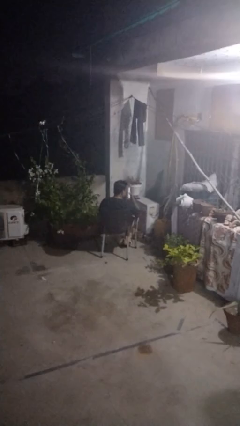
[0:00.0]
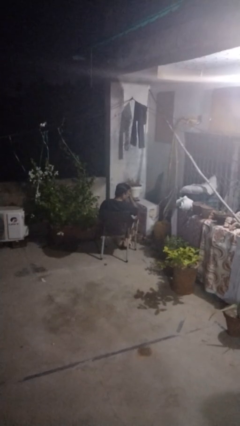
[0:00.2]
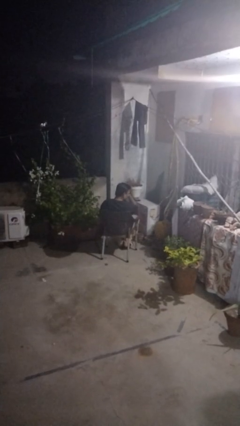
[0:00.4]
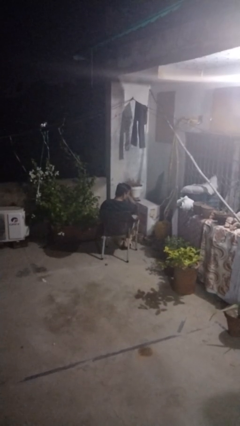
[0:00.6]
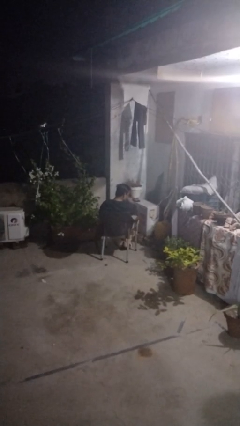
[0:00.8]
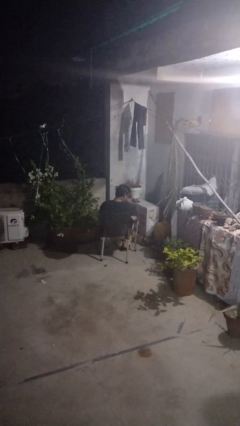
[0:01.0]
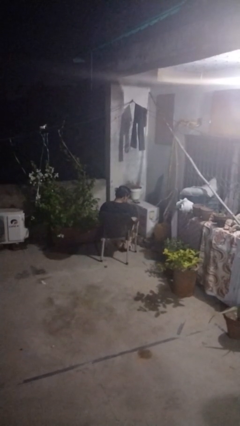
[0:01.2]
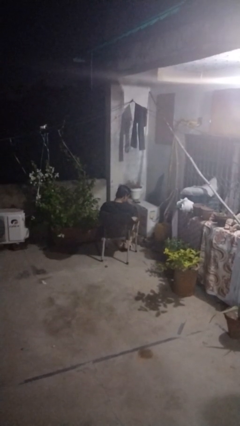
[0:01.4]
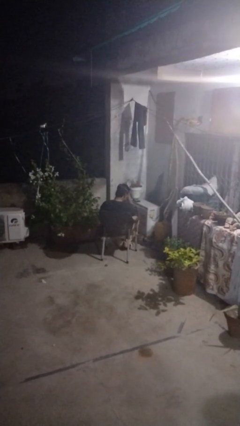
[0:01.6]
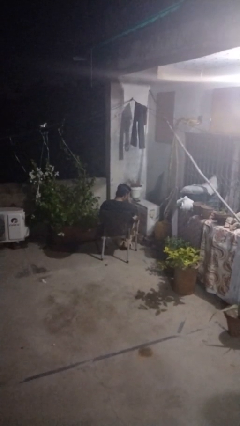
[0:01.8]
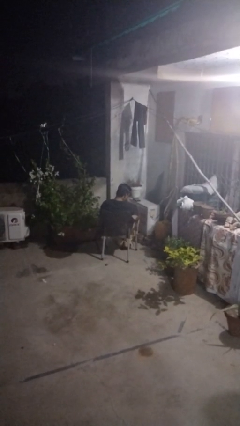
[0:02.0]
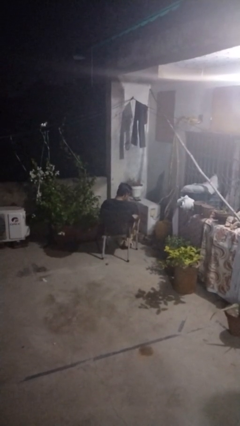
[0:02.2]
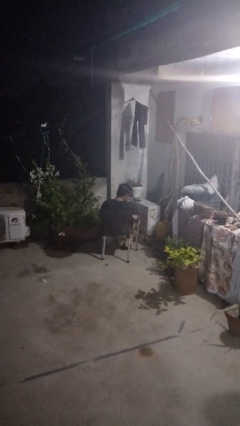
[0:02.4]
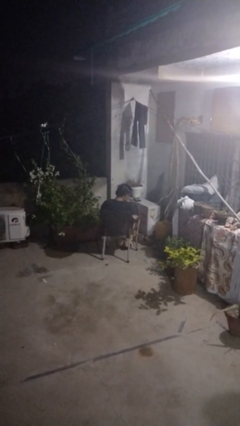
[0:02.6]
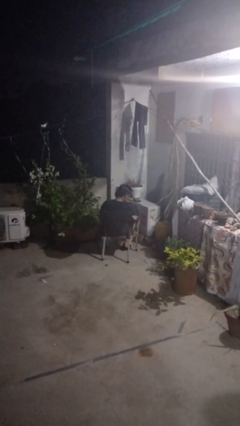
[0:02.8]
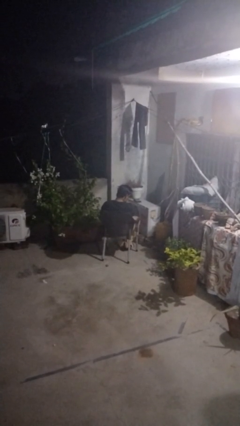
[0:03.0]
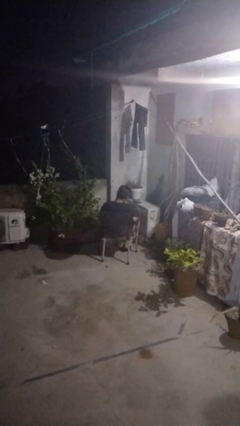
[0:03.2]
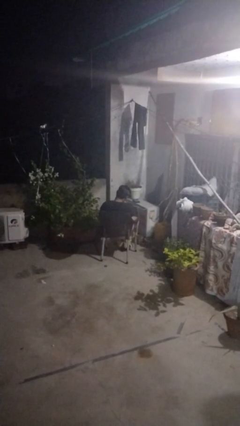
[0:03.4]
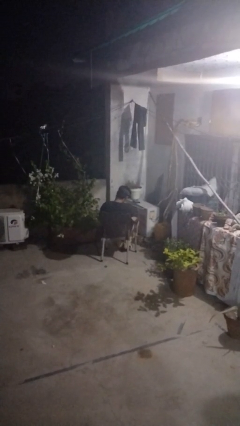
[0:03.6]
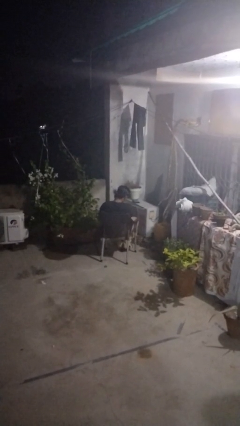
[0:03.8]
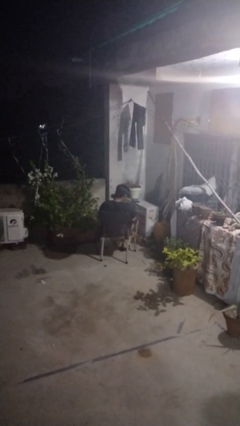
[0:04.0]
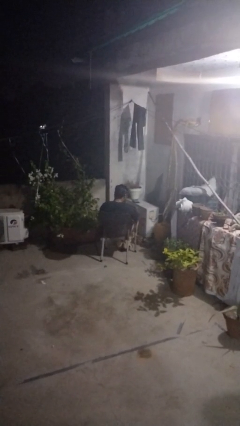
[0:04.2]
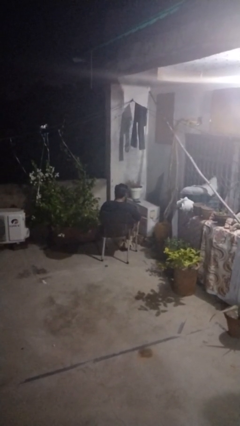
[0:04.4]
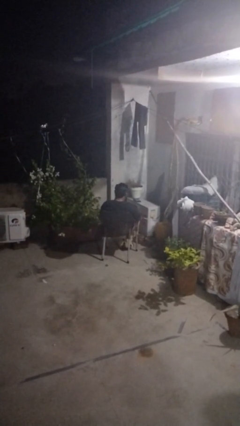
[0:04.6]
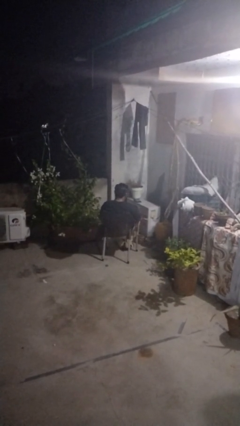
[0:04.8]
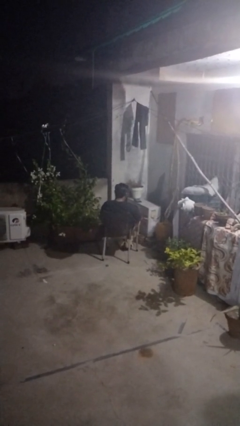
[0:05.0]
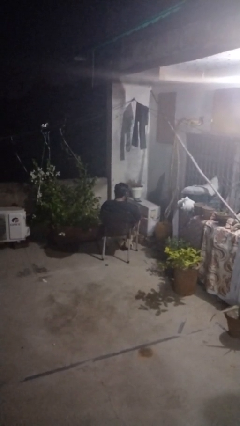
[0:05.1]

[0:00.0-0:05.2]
person dries hair with hairdryer

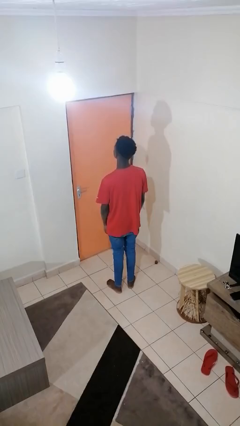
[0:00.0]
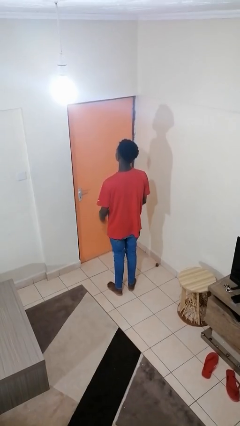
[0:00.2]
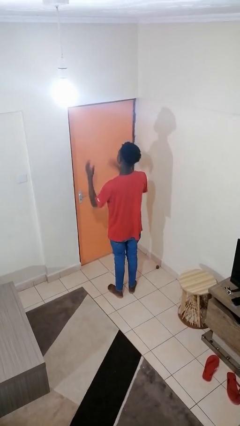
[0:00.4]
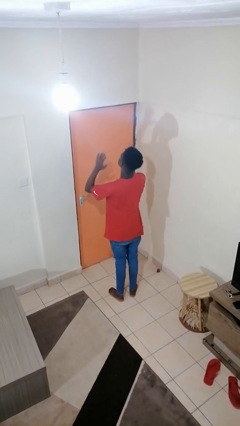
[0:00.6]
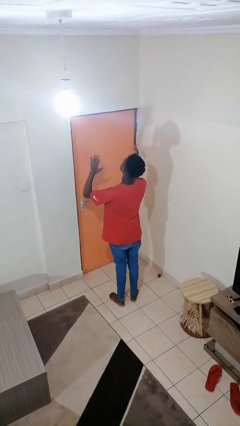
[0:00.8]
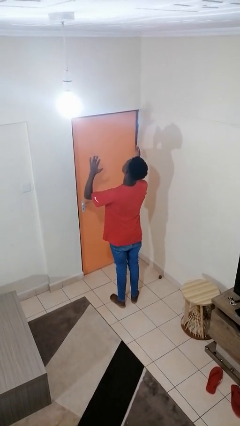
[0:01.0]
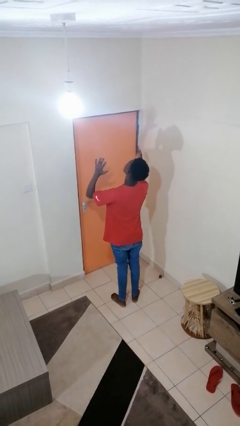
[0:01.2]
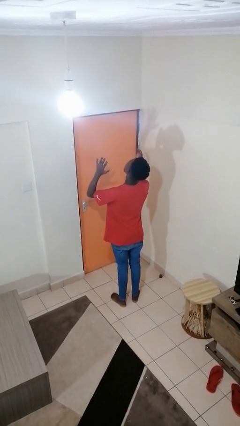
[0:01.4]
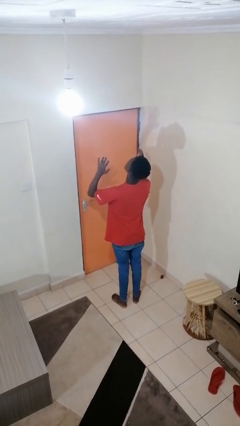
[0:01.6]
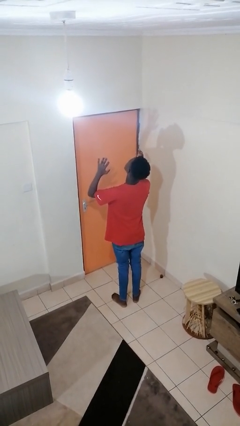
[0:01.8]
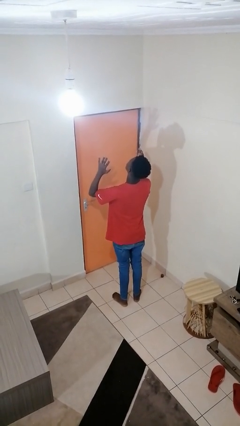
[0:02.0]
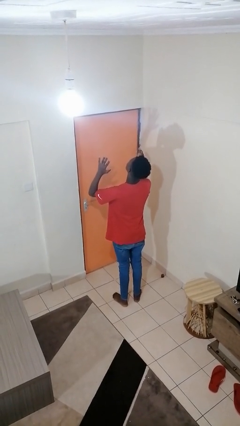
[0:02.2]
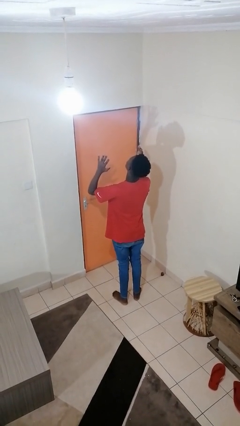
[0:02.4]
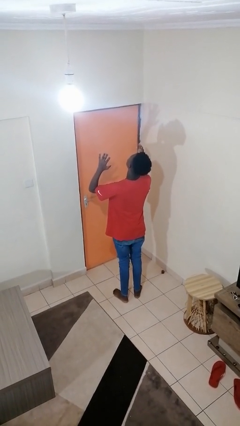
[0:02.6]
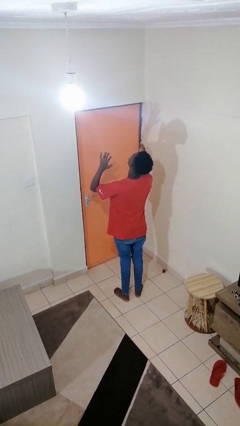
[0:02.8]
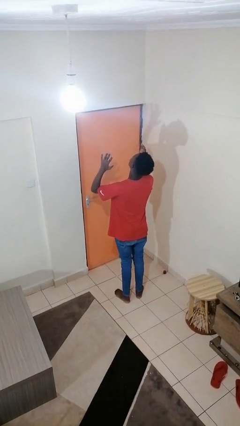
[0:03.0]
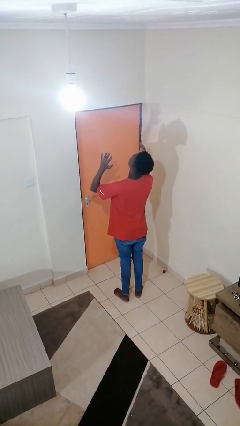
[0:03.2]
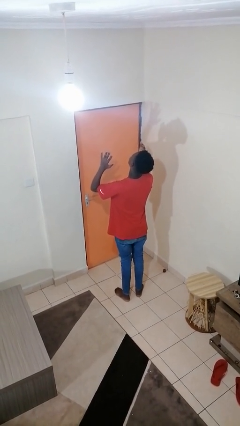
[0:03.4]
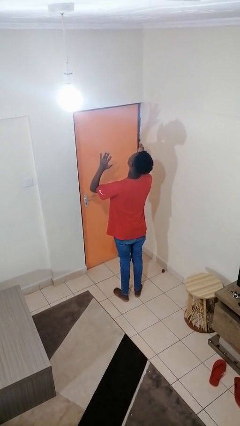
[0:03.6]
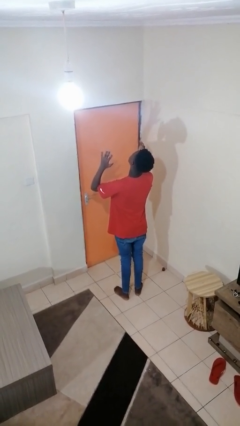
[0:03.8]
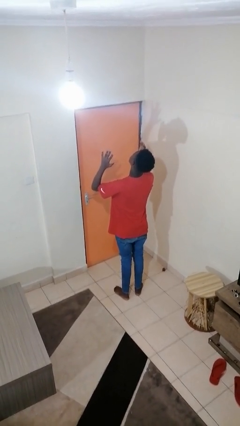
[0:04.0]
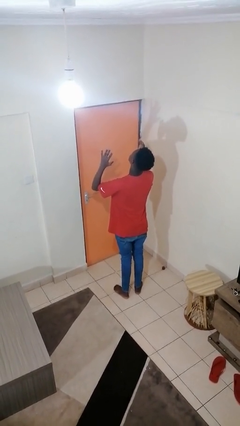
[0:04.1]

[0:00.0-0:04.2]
person prays

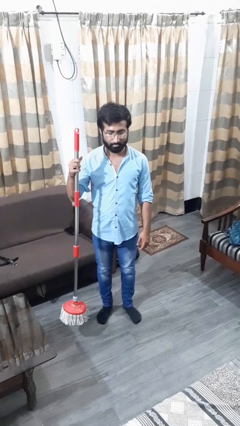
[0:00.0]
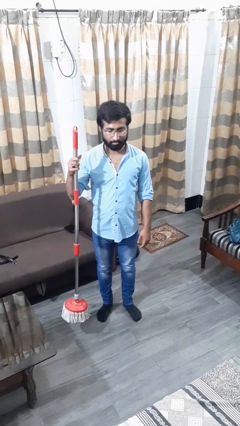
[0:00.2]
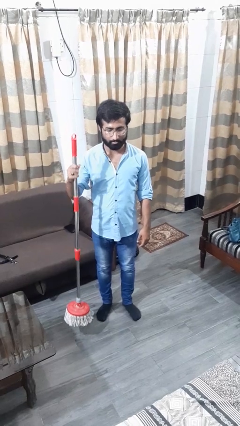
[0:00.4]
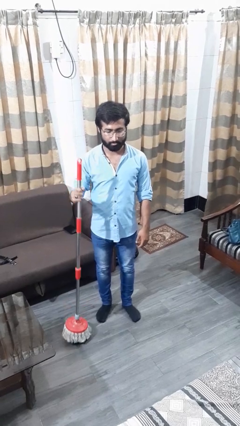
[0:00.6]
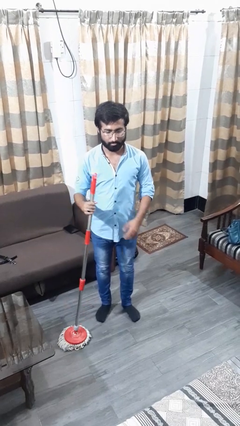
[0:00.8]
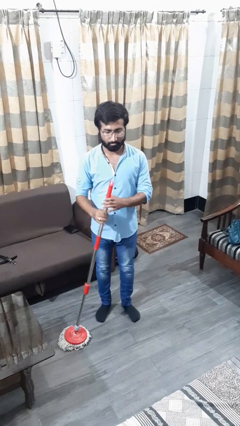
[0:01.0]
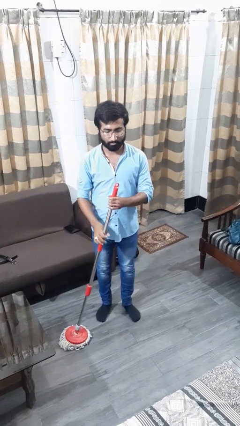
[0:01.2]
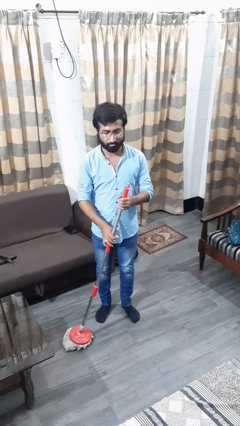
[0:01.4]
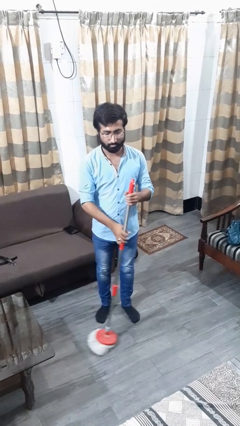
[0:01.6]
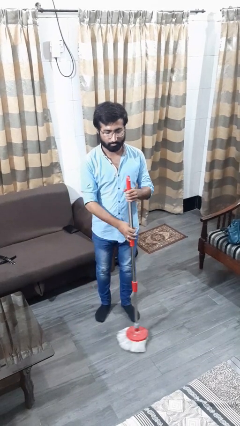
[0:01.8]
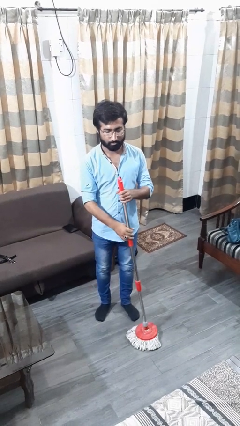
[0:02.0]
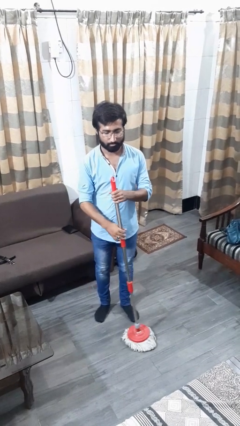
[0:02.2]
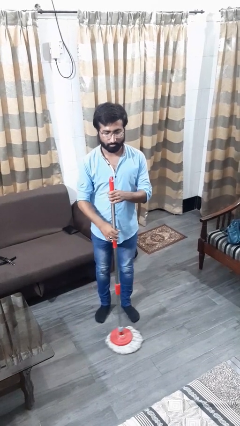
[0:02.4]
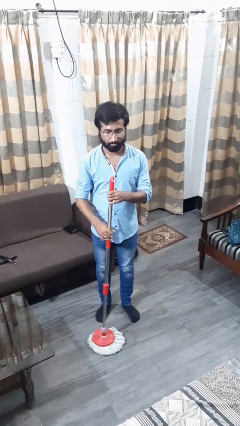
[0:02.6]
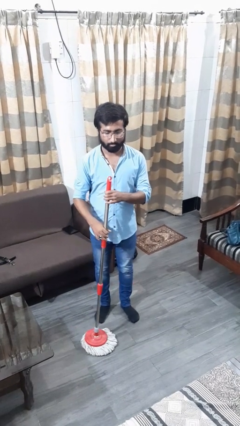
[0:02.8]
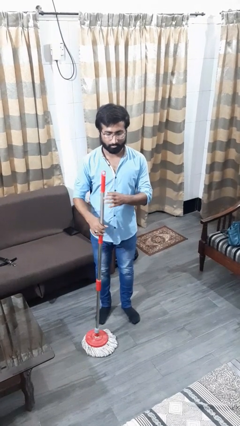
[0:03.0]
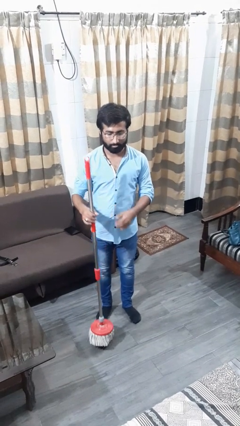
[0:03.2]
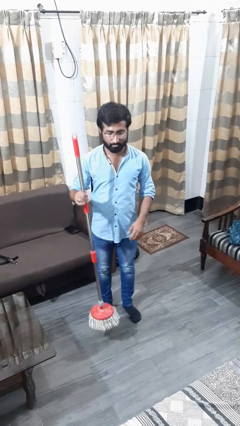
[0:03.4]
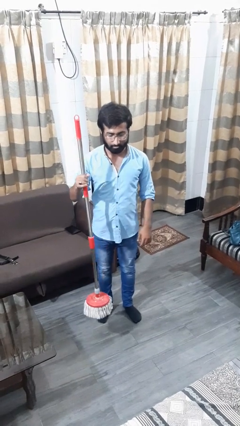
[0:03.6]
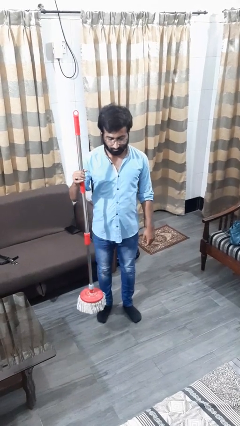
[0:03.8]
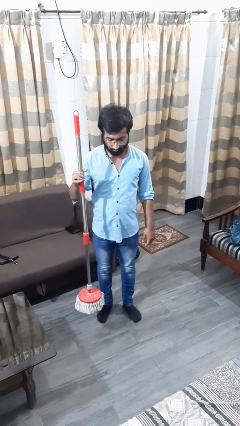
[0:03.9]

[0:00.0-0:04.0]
person sweeps floor

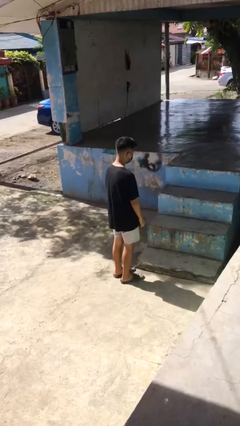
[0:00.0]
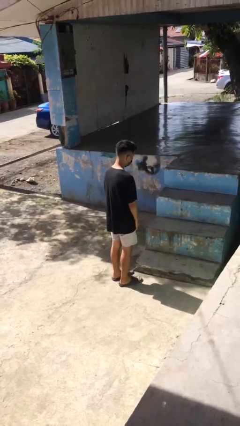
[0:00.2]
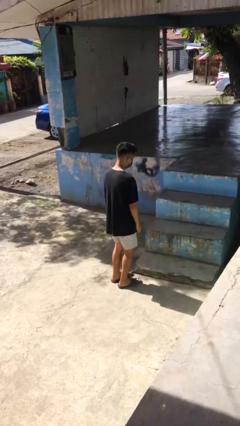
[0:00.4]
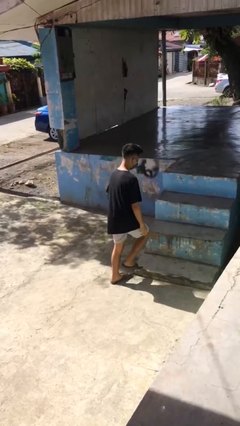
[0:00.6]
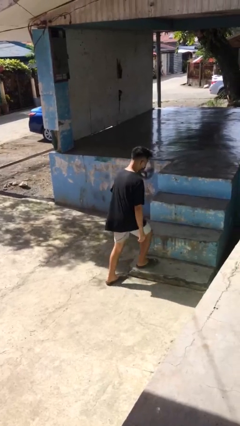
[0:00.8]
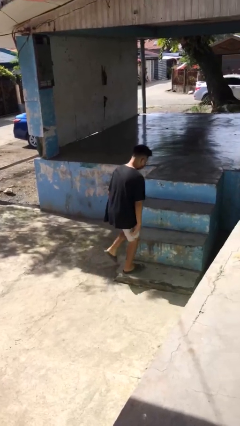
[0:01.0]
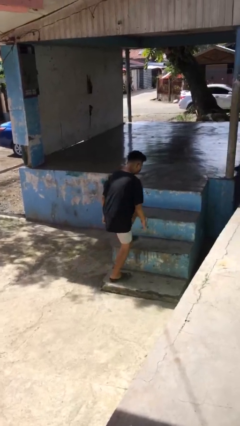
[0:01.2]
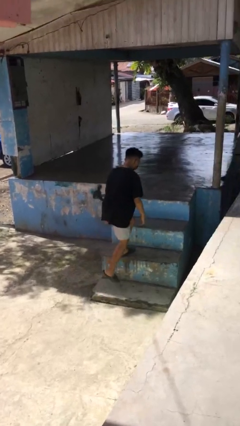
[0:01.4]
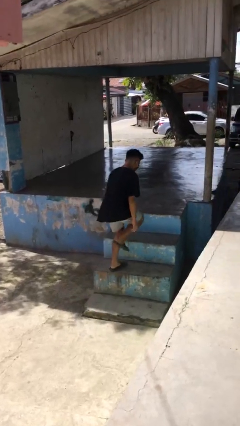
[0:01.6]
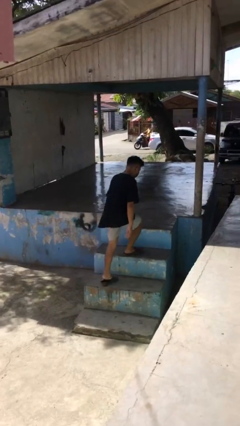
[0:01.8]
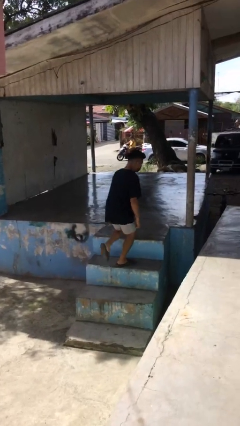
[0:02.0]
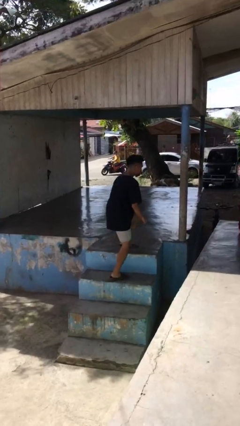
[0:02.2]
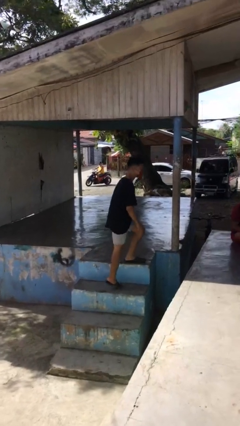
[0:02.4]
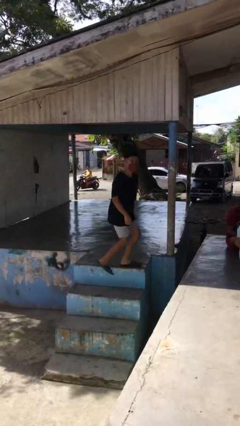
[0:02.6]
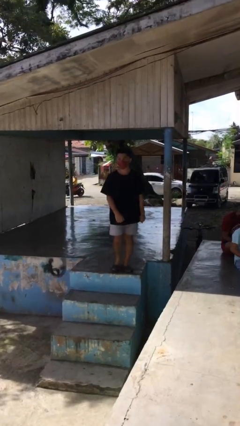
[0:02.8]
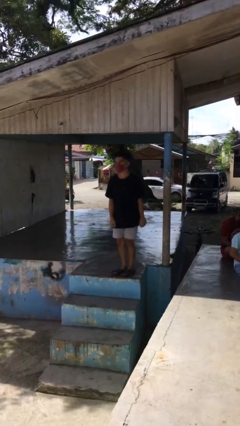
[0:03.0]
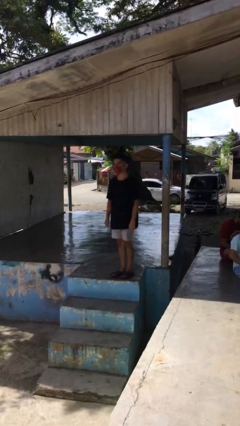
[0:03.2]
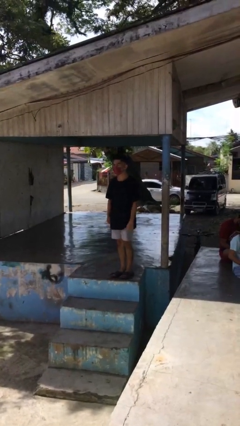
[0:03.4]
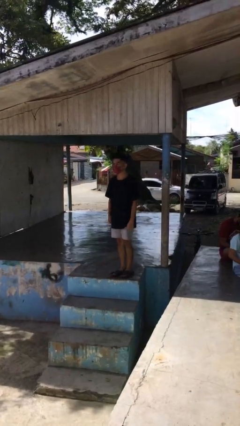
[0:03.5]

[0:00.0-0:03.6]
person climbs up stairs

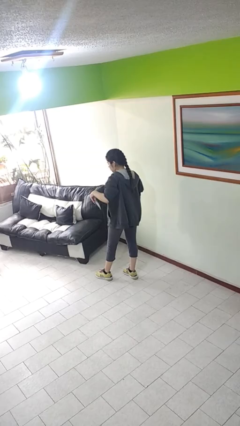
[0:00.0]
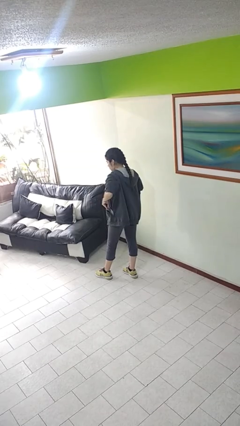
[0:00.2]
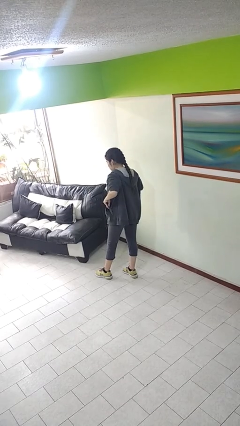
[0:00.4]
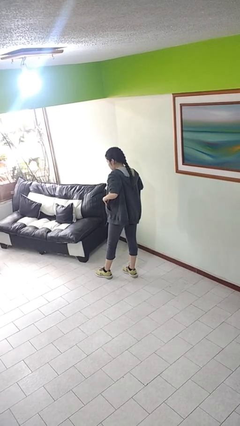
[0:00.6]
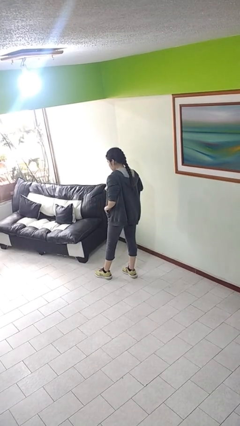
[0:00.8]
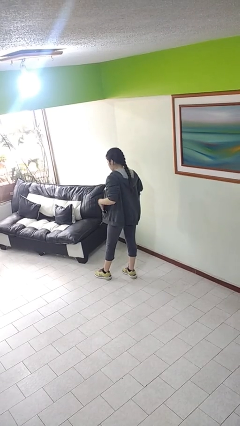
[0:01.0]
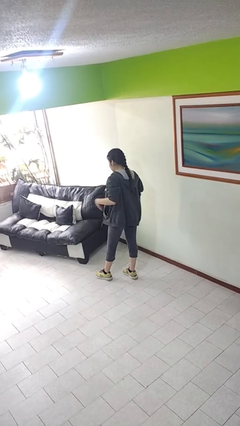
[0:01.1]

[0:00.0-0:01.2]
person puts phone into pocket
